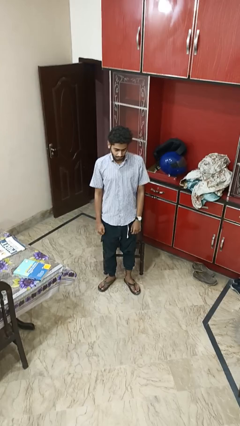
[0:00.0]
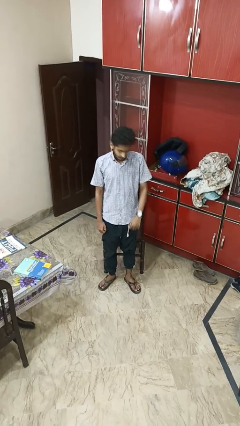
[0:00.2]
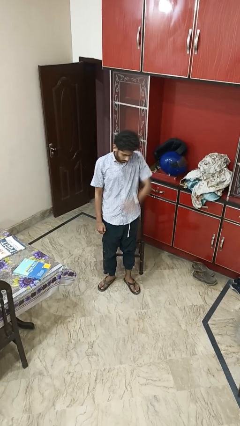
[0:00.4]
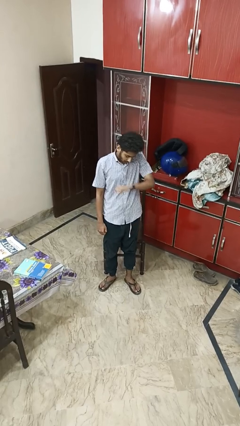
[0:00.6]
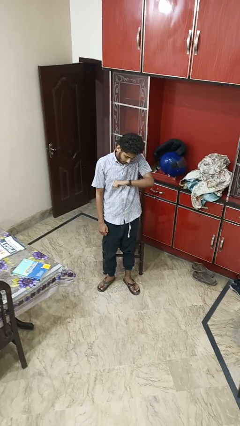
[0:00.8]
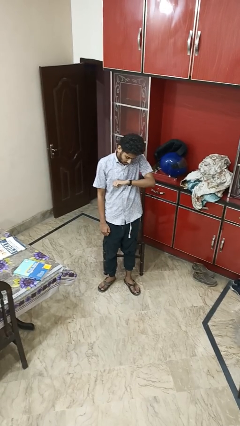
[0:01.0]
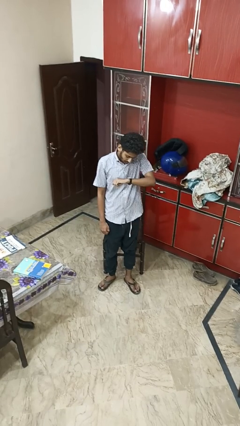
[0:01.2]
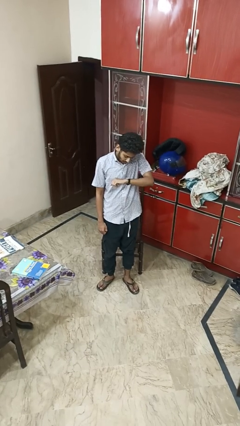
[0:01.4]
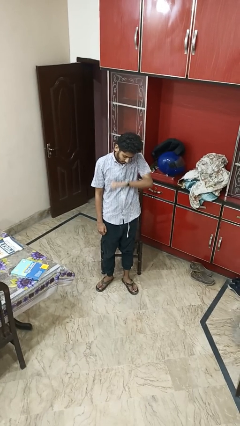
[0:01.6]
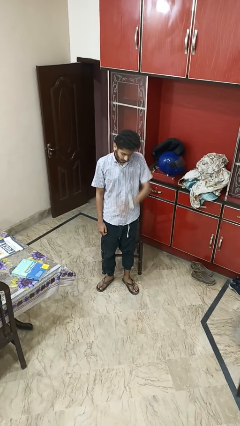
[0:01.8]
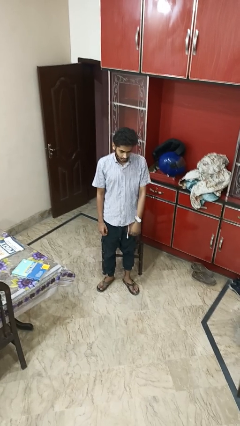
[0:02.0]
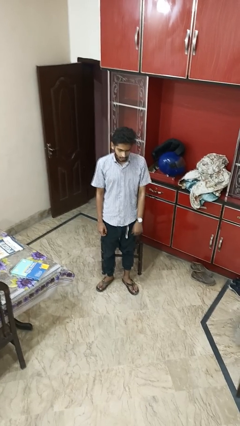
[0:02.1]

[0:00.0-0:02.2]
person looks at wristwatch

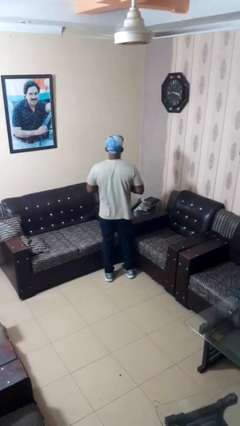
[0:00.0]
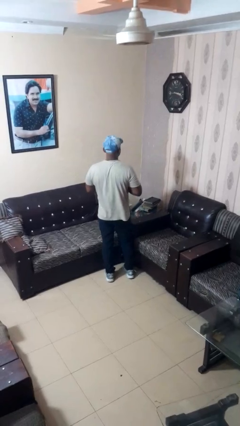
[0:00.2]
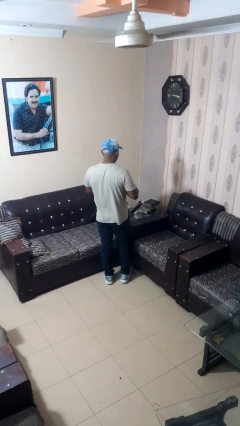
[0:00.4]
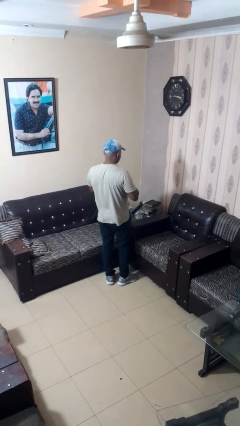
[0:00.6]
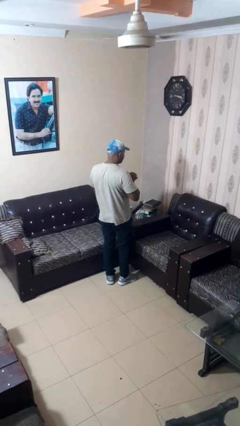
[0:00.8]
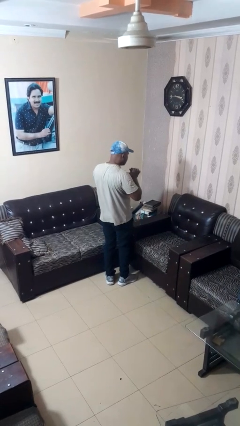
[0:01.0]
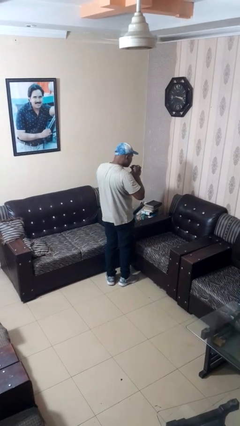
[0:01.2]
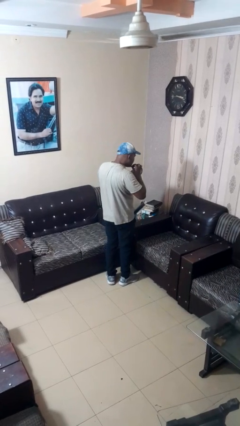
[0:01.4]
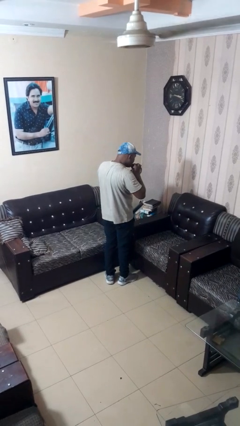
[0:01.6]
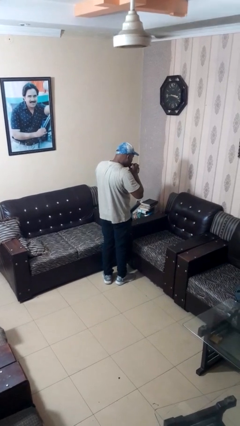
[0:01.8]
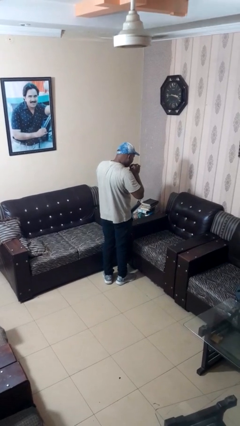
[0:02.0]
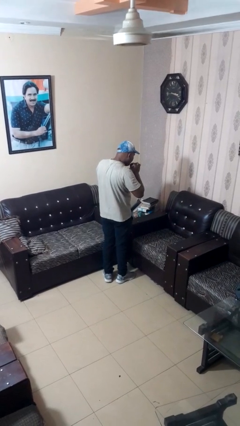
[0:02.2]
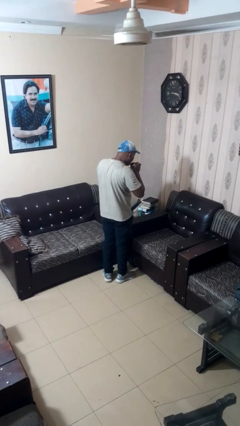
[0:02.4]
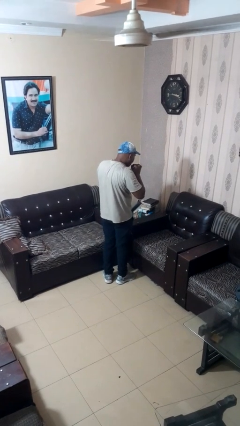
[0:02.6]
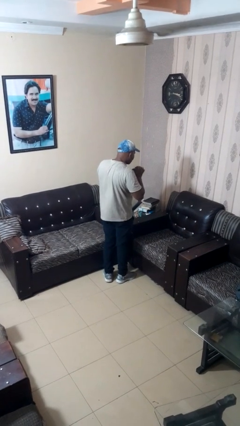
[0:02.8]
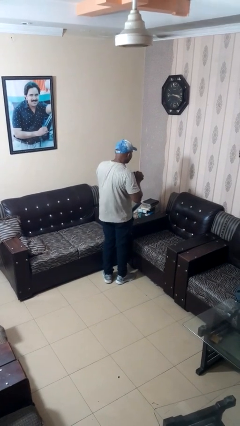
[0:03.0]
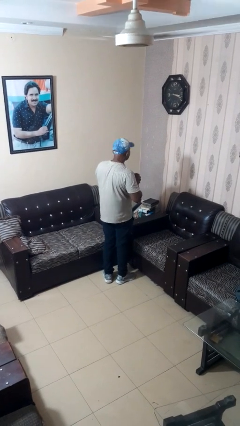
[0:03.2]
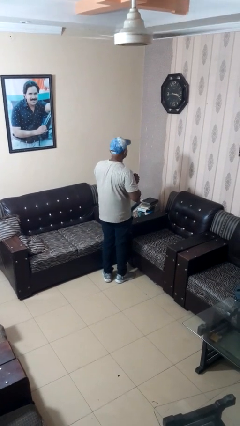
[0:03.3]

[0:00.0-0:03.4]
person drinks from straw

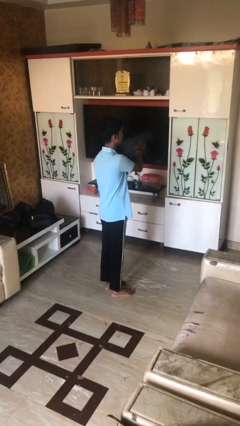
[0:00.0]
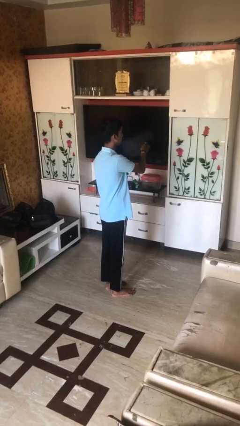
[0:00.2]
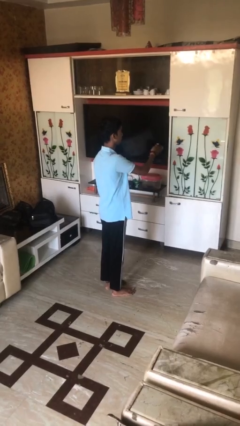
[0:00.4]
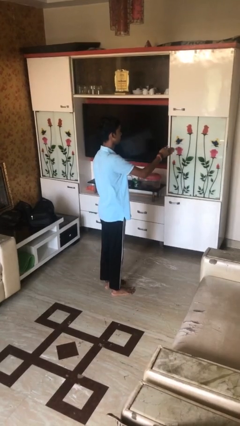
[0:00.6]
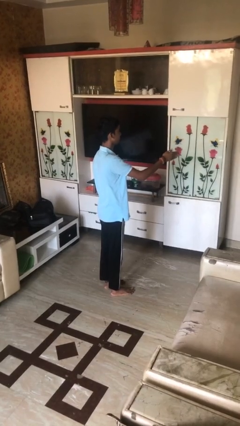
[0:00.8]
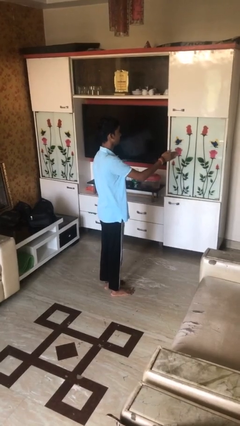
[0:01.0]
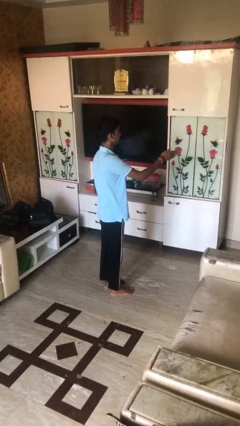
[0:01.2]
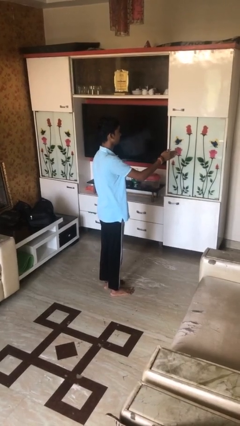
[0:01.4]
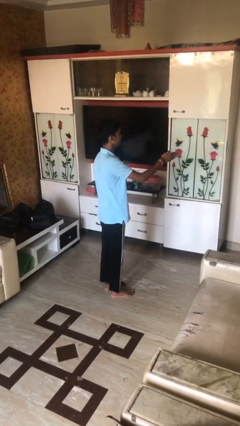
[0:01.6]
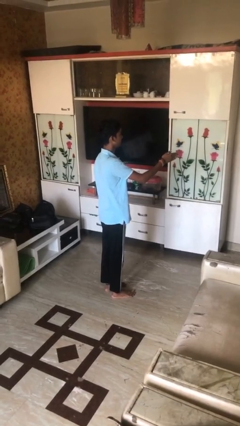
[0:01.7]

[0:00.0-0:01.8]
person gestures swipe right

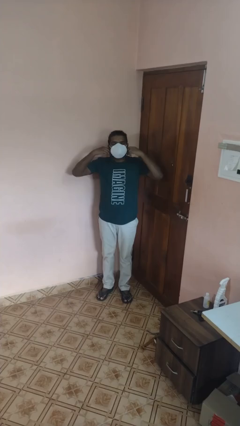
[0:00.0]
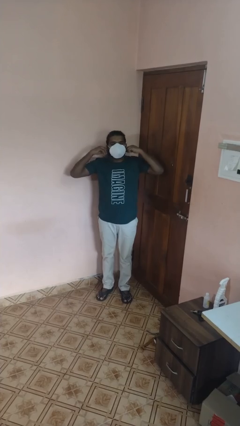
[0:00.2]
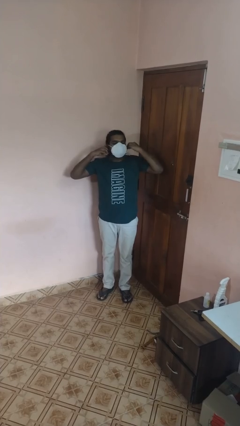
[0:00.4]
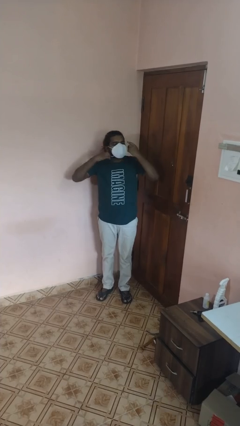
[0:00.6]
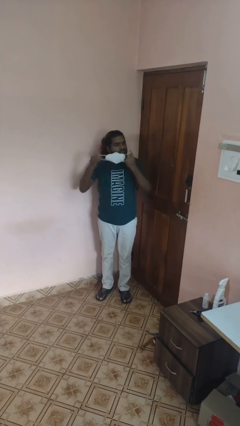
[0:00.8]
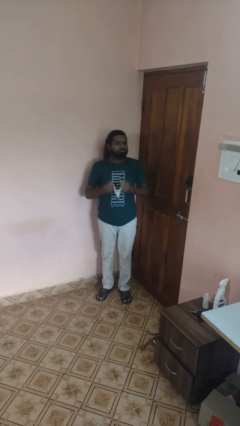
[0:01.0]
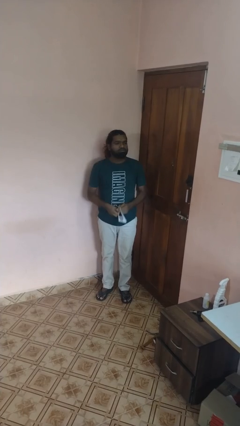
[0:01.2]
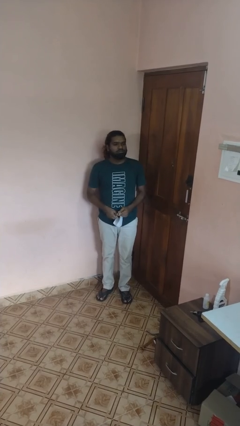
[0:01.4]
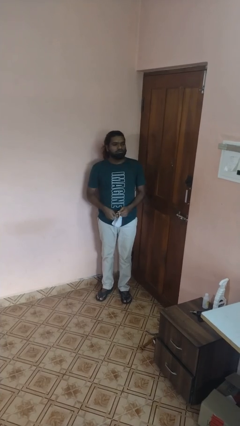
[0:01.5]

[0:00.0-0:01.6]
person takes off facemask

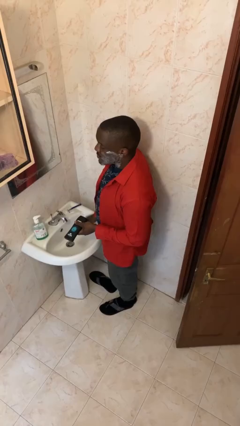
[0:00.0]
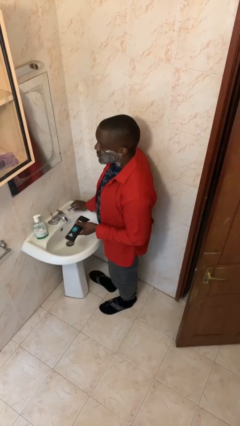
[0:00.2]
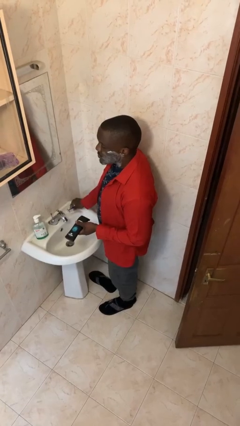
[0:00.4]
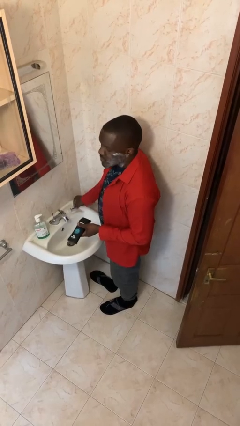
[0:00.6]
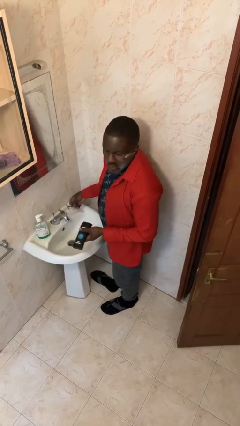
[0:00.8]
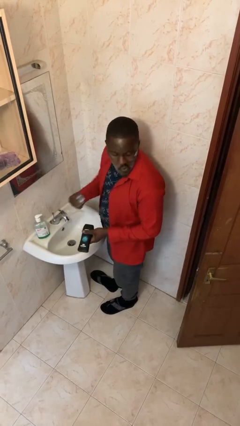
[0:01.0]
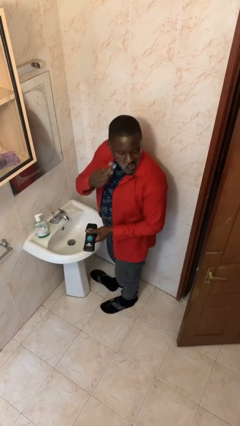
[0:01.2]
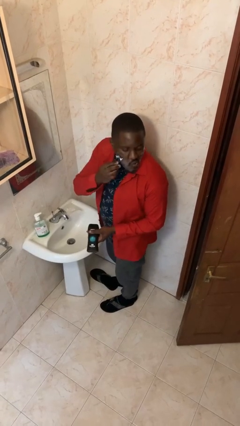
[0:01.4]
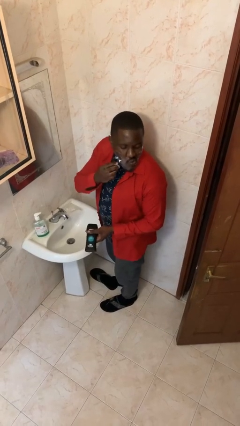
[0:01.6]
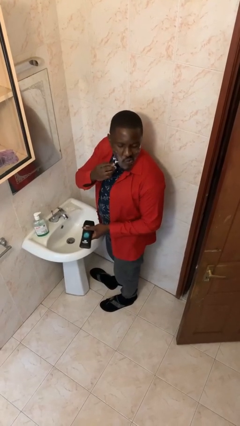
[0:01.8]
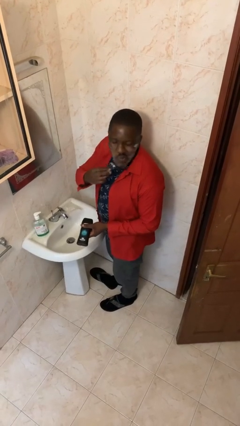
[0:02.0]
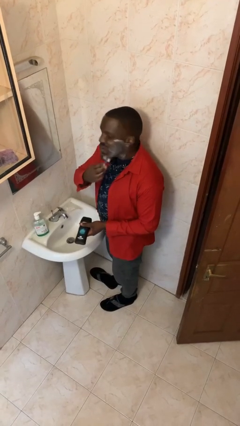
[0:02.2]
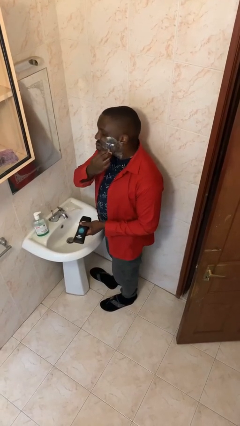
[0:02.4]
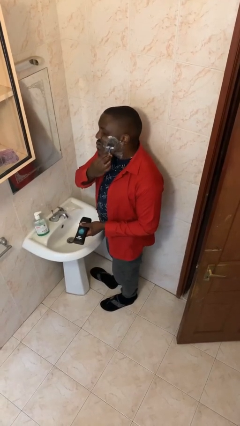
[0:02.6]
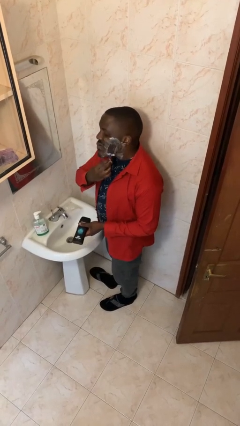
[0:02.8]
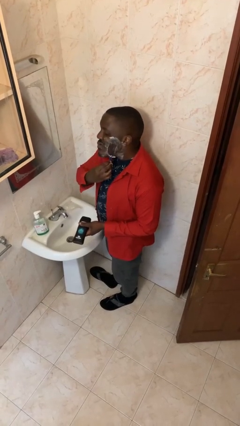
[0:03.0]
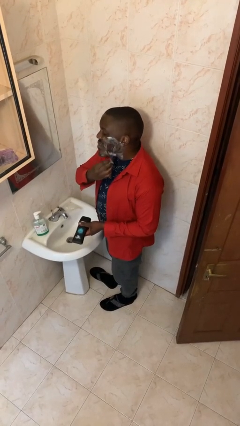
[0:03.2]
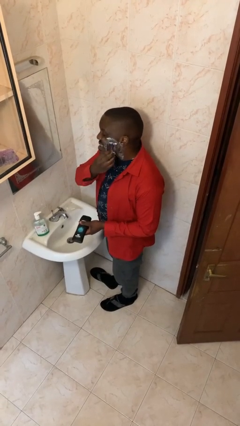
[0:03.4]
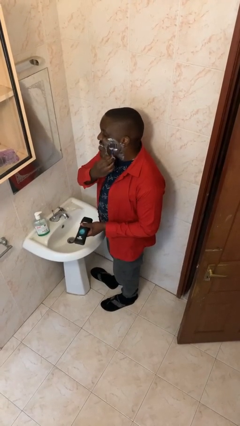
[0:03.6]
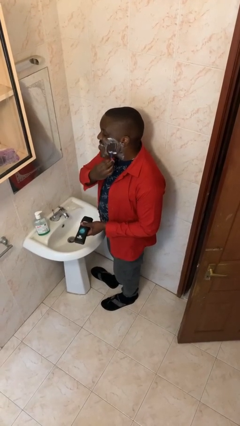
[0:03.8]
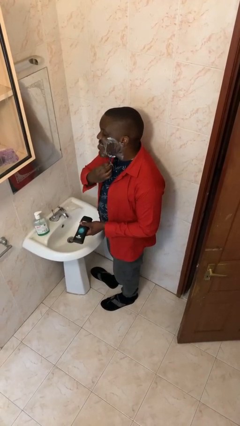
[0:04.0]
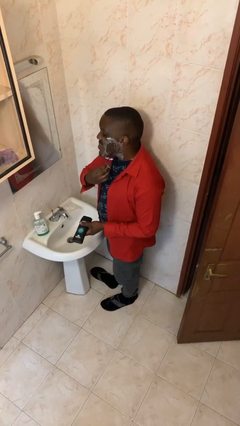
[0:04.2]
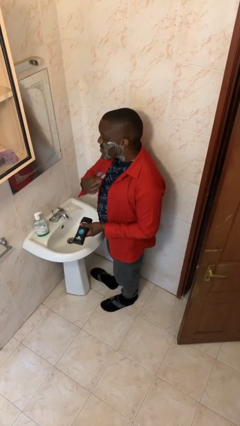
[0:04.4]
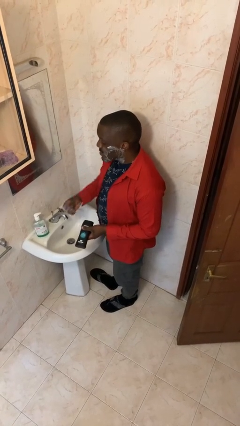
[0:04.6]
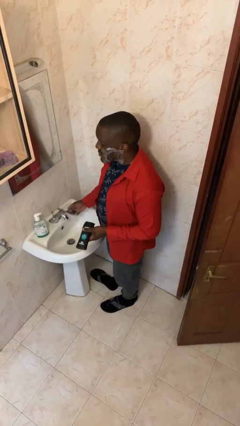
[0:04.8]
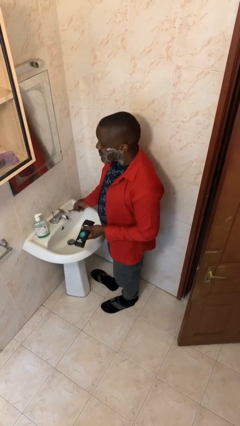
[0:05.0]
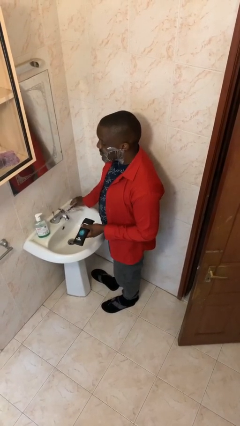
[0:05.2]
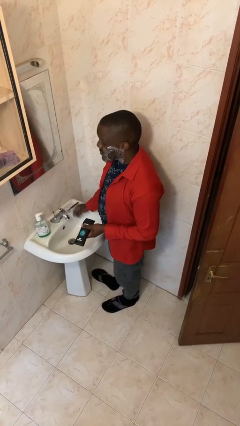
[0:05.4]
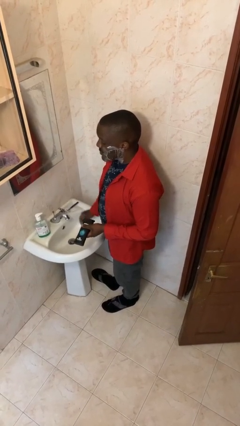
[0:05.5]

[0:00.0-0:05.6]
person shaves face

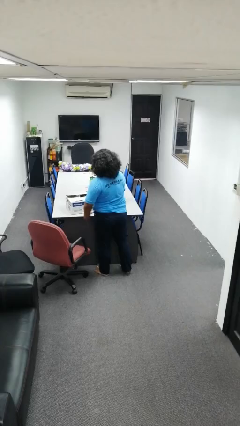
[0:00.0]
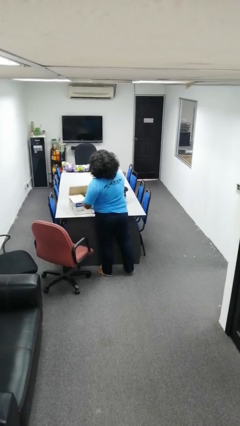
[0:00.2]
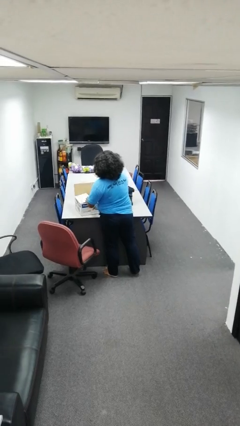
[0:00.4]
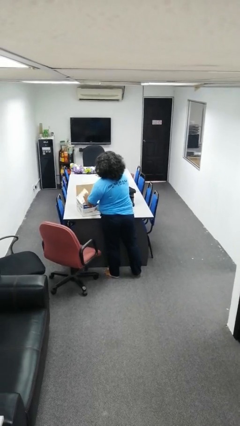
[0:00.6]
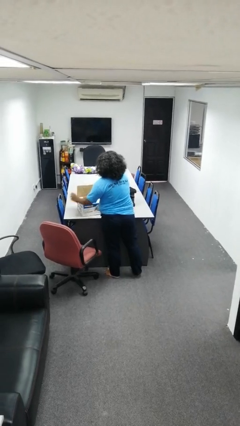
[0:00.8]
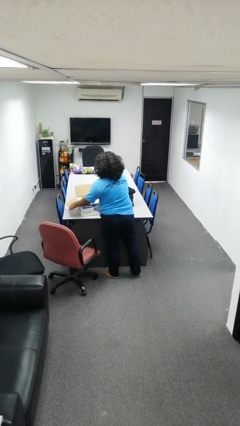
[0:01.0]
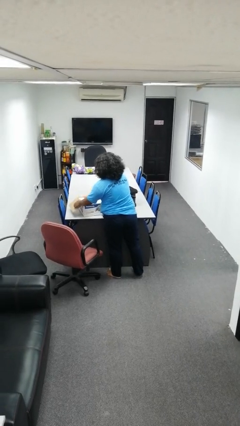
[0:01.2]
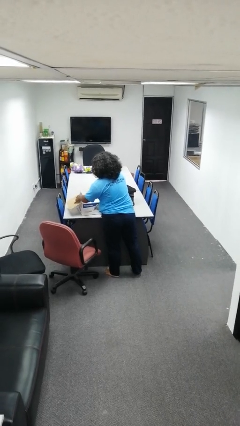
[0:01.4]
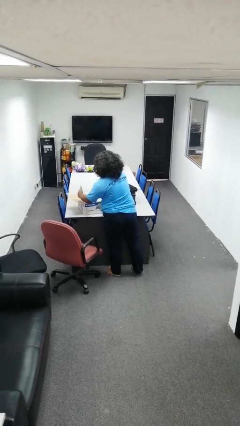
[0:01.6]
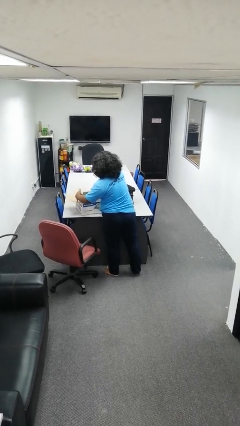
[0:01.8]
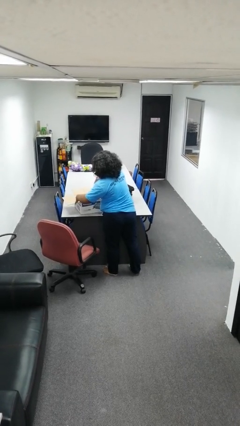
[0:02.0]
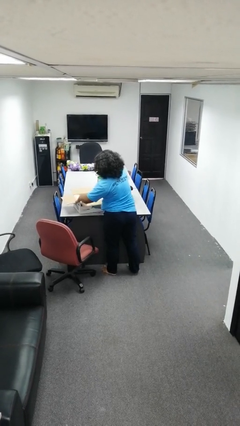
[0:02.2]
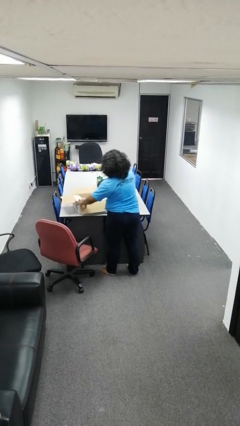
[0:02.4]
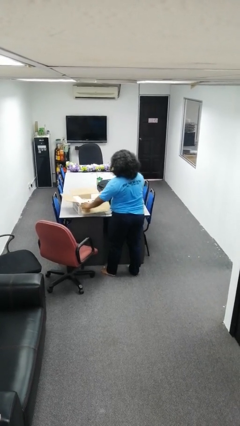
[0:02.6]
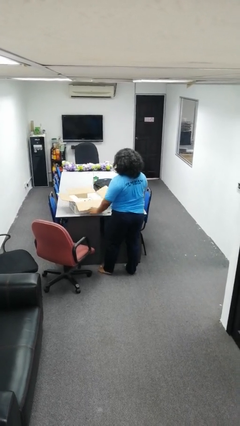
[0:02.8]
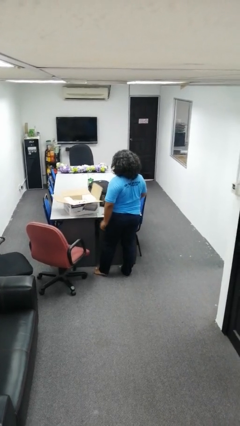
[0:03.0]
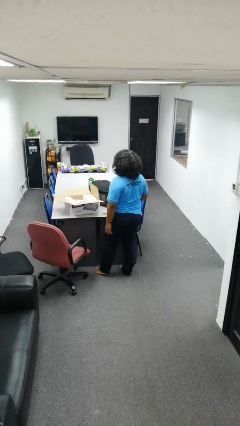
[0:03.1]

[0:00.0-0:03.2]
person opens box
